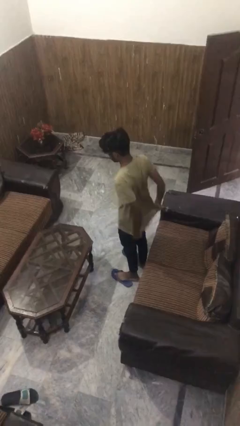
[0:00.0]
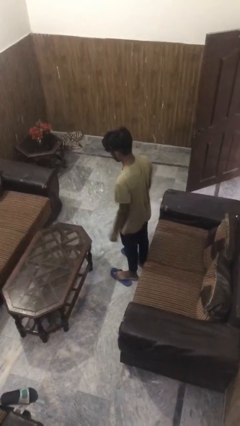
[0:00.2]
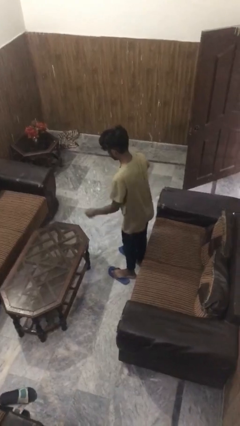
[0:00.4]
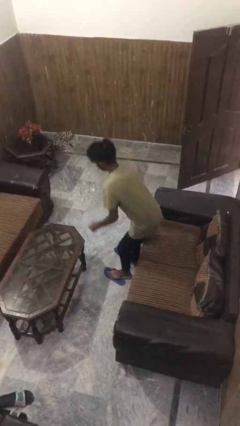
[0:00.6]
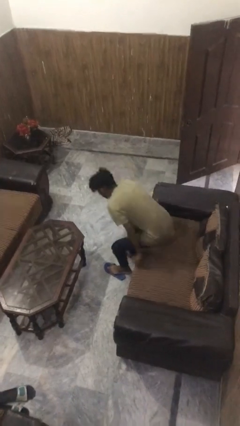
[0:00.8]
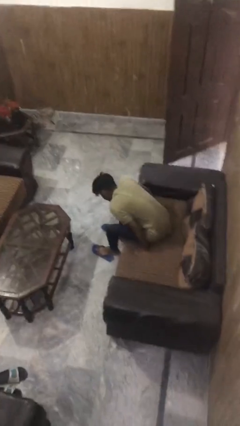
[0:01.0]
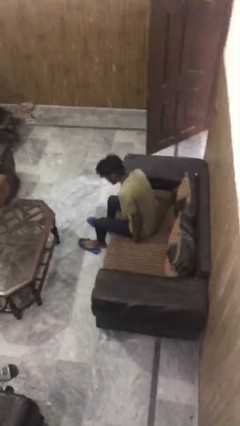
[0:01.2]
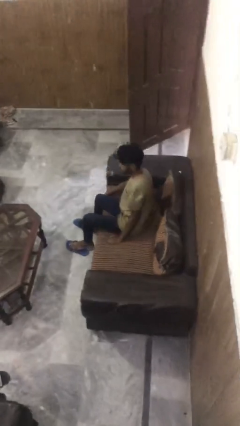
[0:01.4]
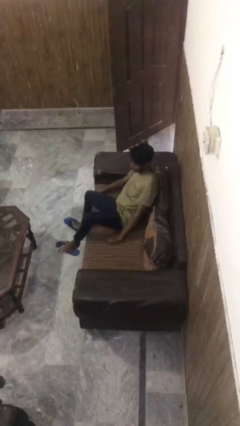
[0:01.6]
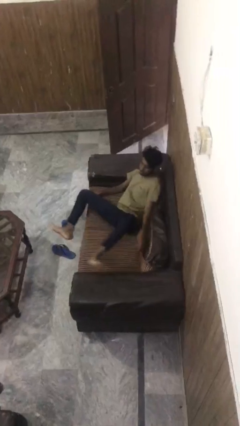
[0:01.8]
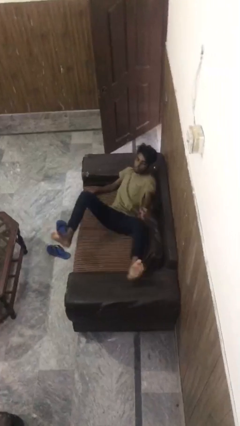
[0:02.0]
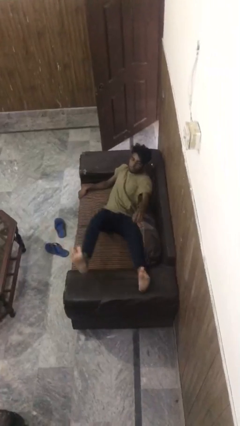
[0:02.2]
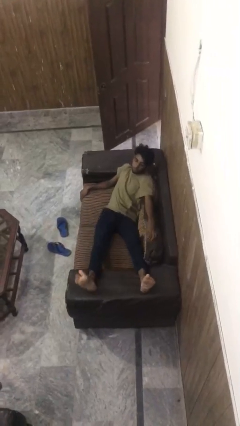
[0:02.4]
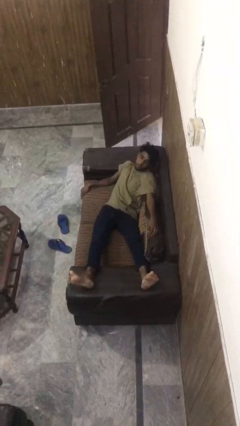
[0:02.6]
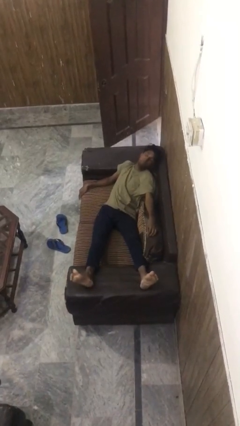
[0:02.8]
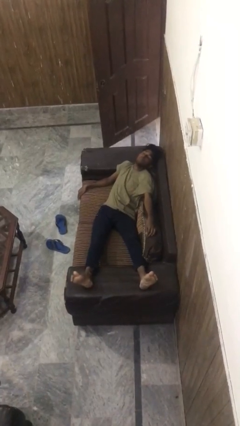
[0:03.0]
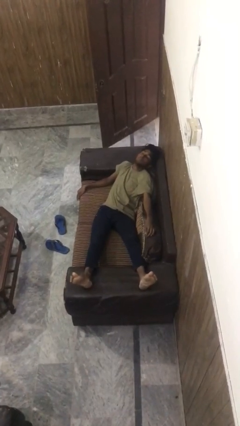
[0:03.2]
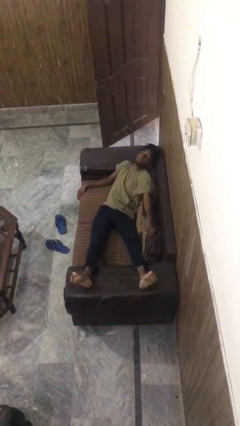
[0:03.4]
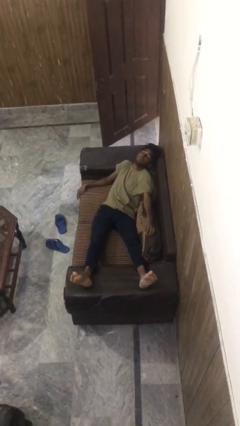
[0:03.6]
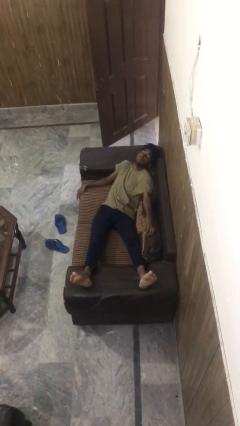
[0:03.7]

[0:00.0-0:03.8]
person lies down on couch

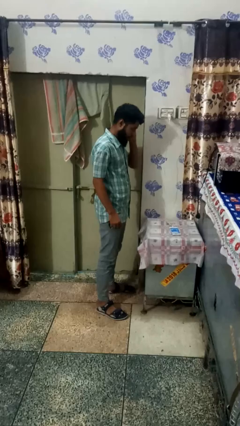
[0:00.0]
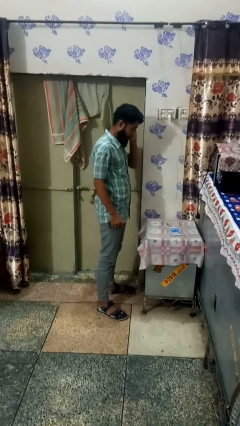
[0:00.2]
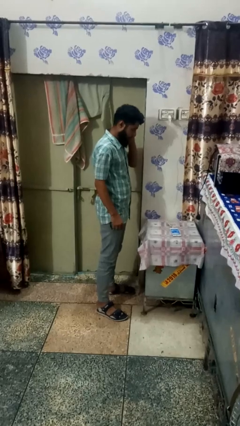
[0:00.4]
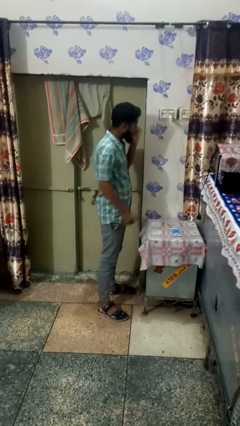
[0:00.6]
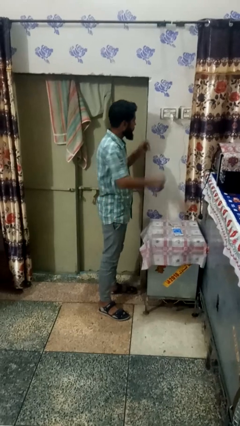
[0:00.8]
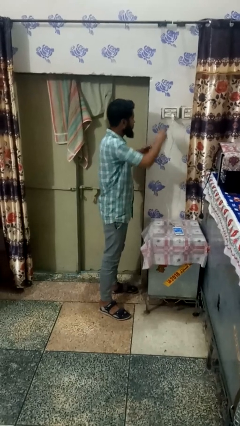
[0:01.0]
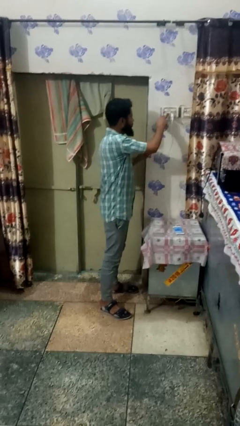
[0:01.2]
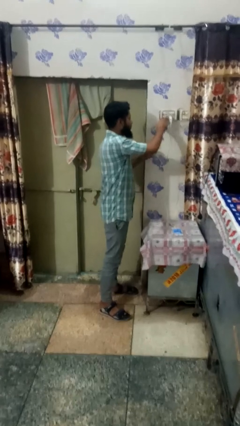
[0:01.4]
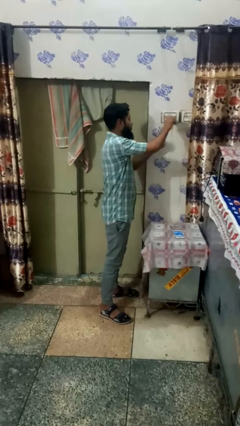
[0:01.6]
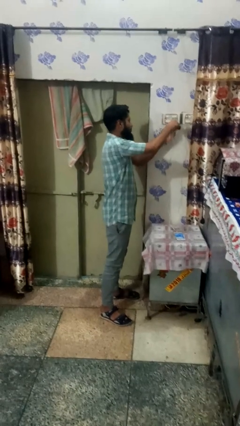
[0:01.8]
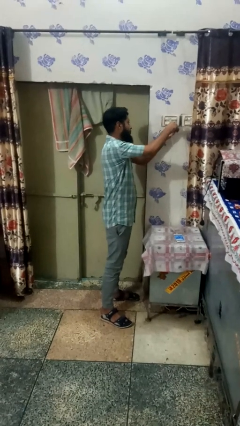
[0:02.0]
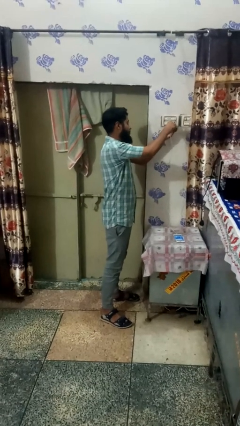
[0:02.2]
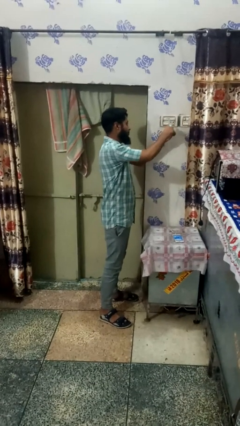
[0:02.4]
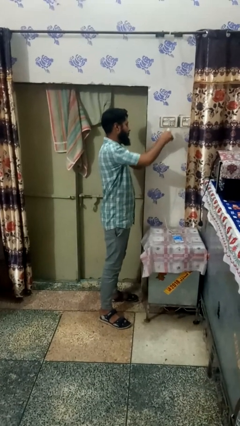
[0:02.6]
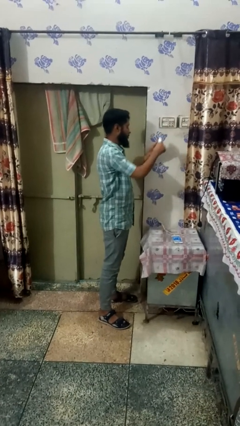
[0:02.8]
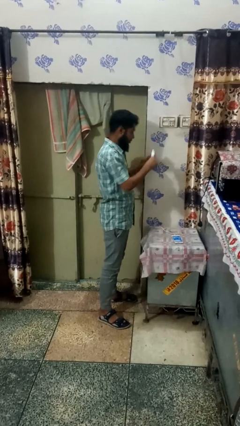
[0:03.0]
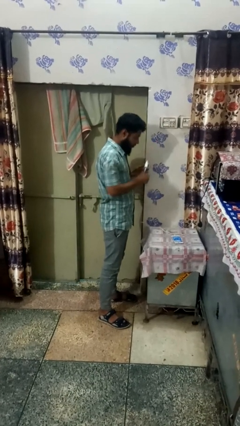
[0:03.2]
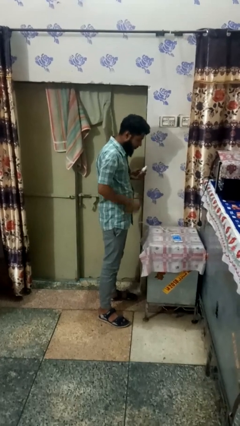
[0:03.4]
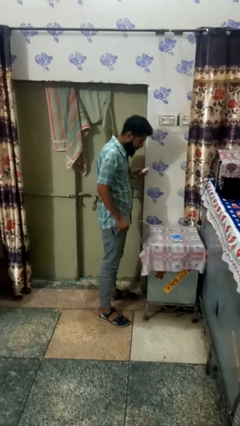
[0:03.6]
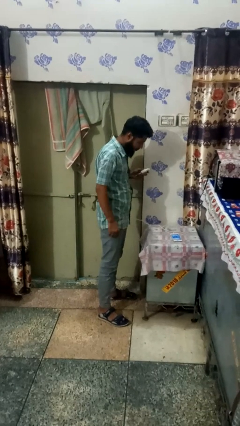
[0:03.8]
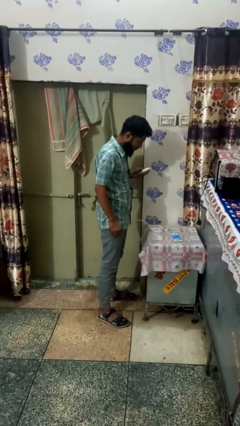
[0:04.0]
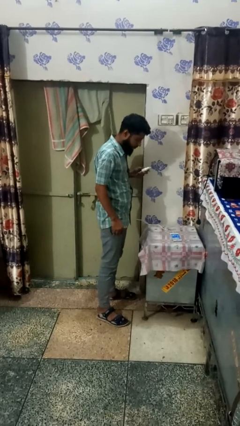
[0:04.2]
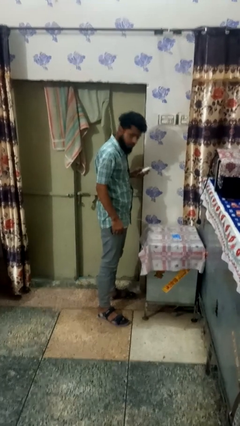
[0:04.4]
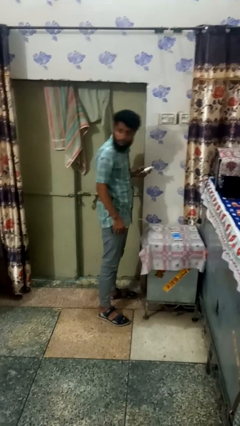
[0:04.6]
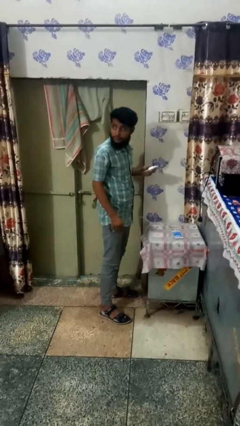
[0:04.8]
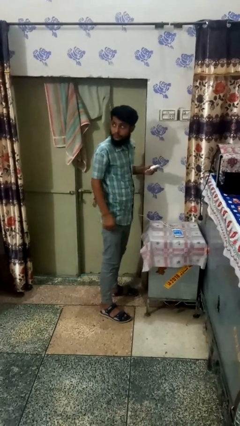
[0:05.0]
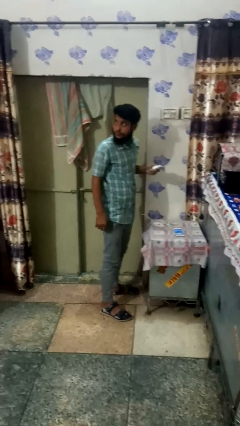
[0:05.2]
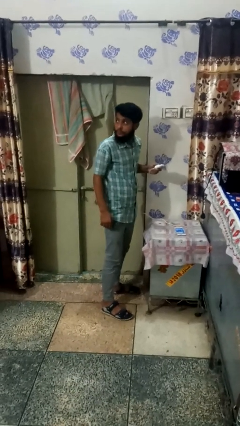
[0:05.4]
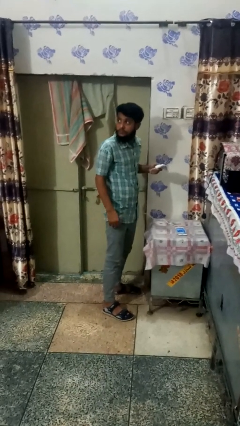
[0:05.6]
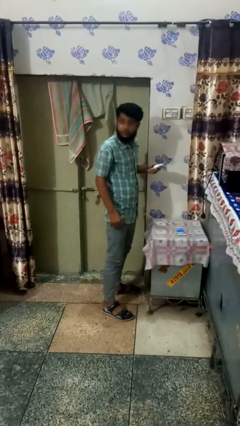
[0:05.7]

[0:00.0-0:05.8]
person unplugs from electrical socket

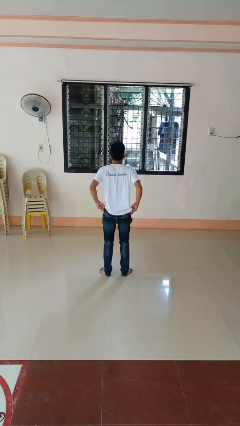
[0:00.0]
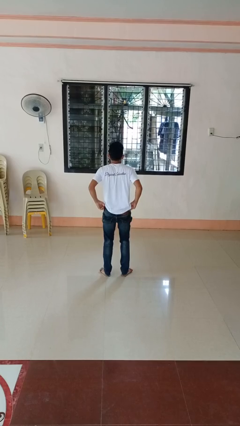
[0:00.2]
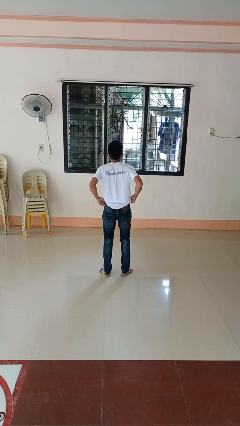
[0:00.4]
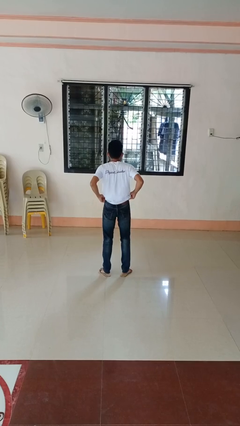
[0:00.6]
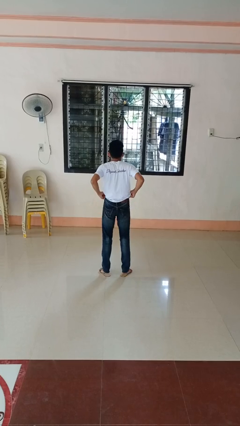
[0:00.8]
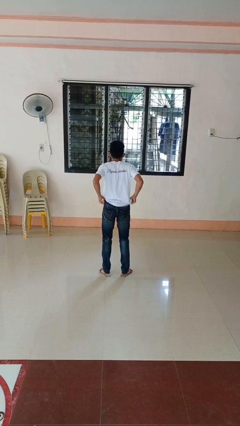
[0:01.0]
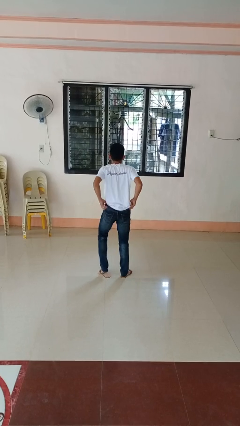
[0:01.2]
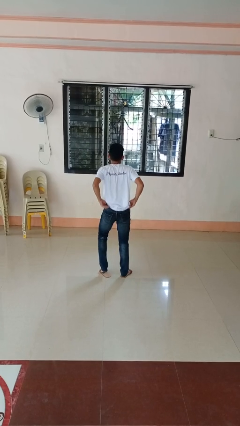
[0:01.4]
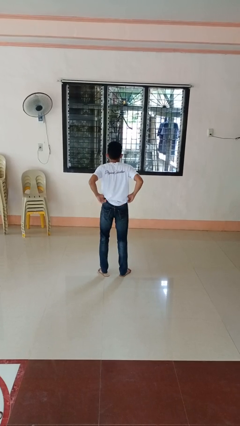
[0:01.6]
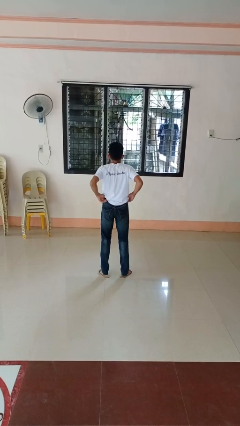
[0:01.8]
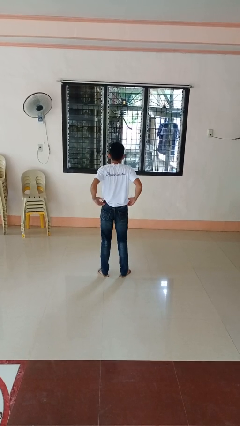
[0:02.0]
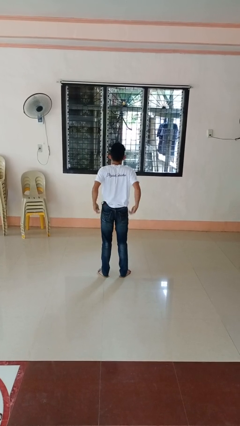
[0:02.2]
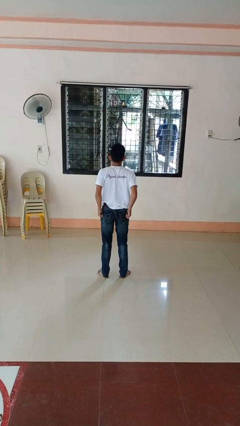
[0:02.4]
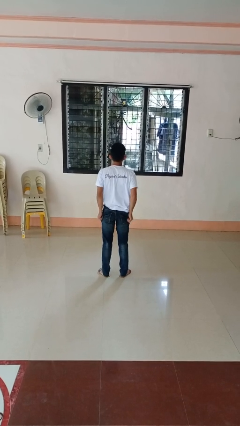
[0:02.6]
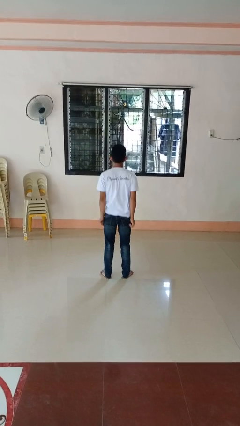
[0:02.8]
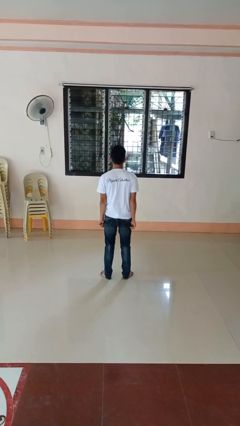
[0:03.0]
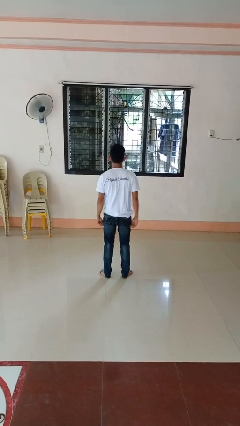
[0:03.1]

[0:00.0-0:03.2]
person hikes up pants

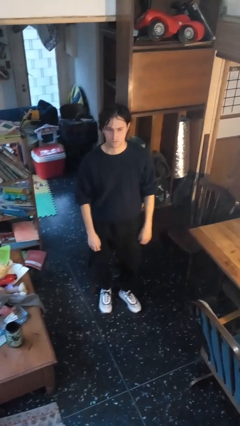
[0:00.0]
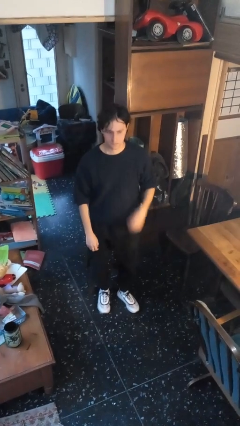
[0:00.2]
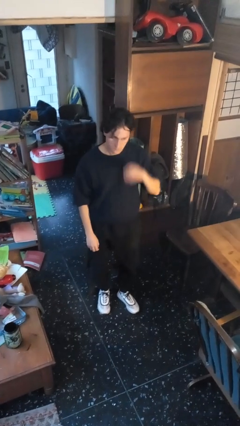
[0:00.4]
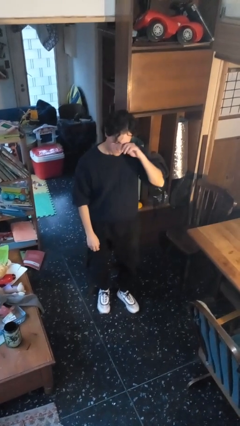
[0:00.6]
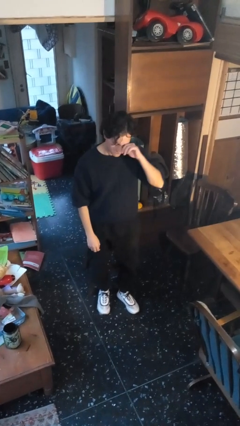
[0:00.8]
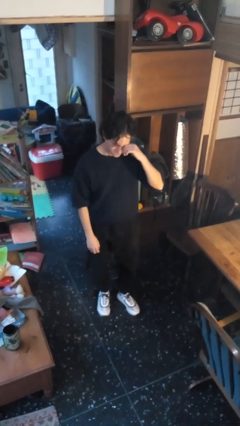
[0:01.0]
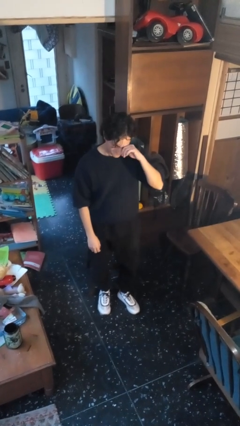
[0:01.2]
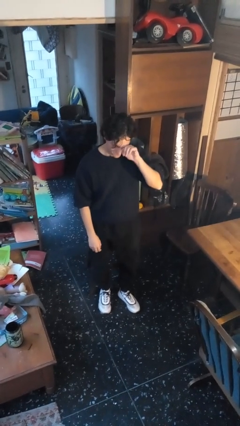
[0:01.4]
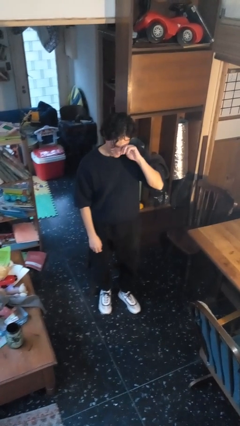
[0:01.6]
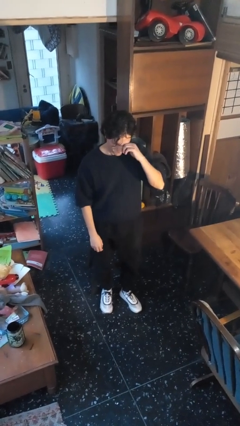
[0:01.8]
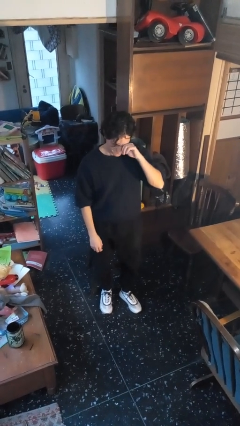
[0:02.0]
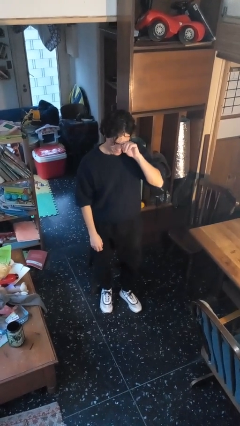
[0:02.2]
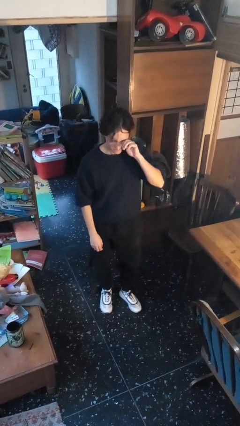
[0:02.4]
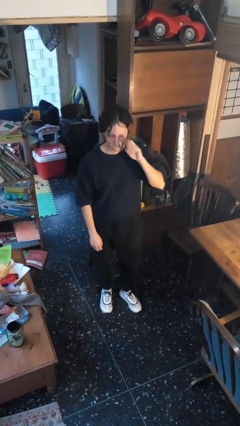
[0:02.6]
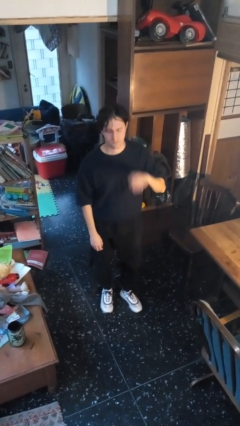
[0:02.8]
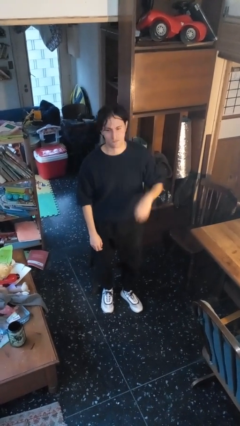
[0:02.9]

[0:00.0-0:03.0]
person rubs eyes

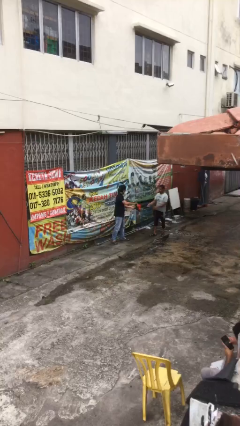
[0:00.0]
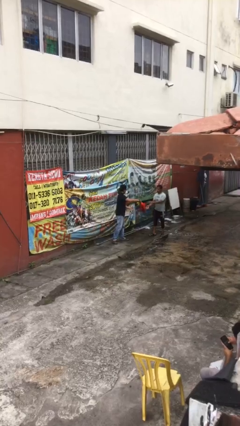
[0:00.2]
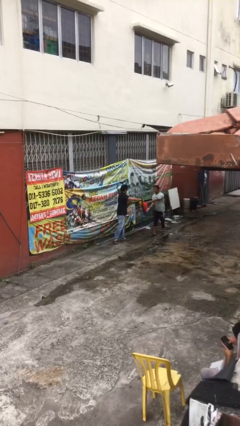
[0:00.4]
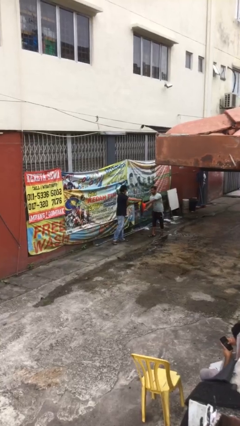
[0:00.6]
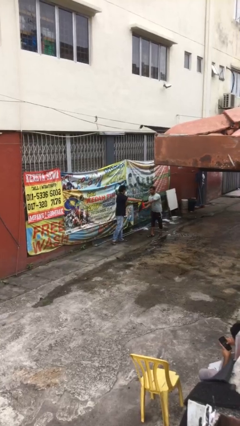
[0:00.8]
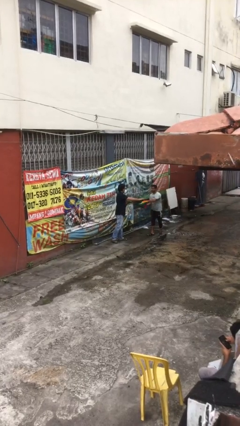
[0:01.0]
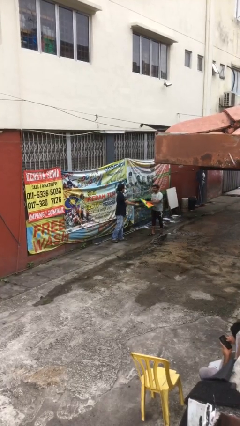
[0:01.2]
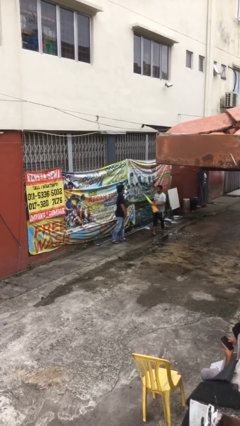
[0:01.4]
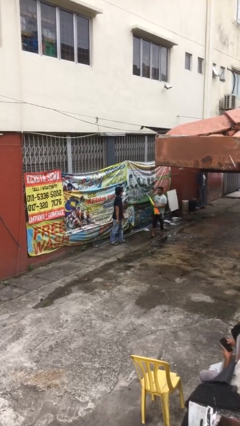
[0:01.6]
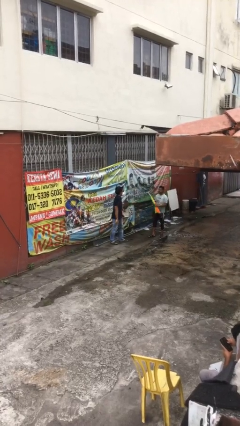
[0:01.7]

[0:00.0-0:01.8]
person transfers object to person

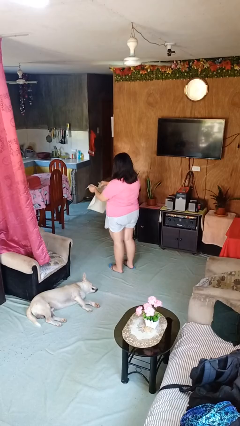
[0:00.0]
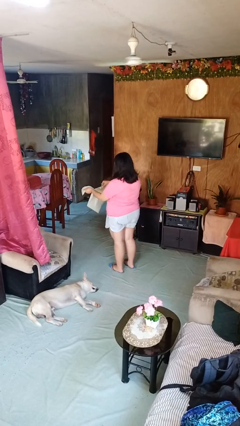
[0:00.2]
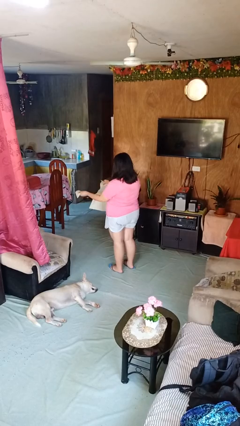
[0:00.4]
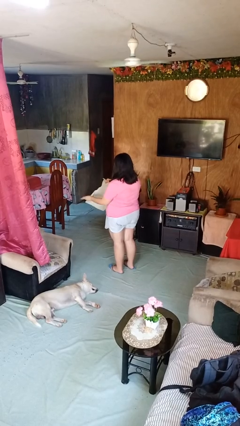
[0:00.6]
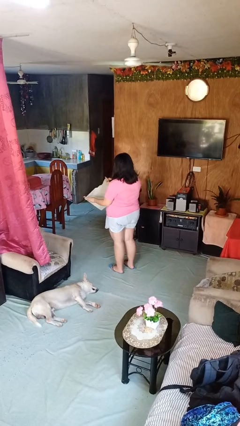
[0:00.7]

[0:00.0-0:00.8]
person tears paper
